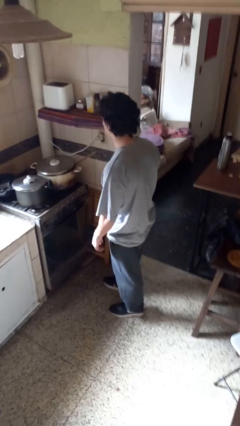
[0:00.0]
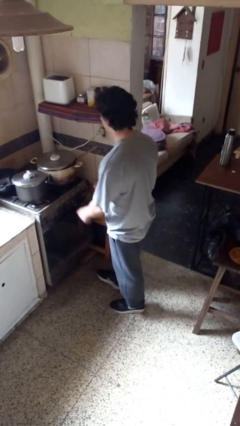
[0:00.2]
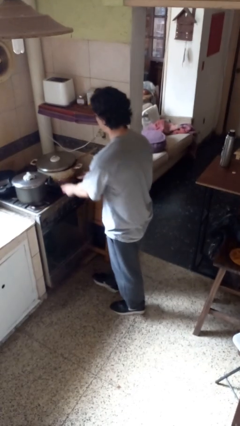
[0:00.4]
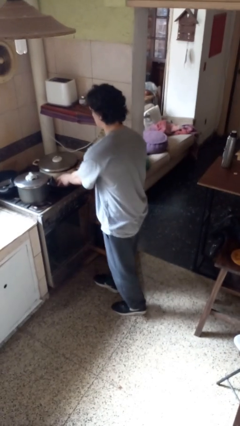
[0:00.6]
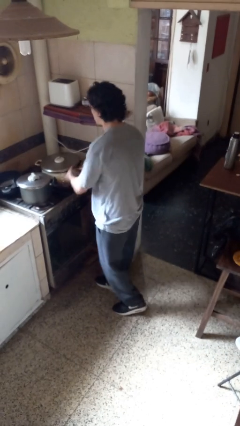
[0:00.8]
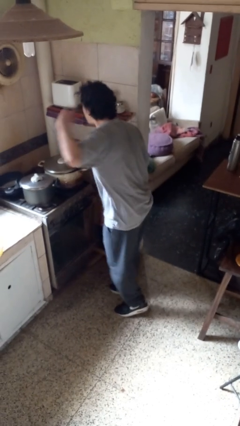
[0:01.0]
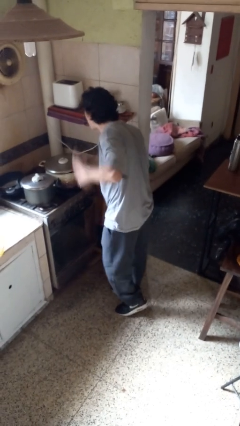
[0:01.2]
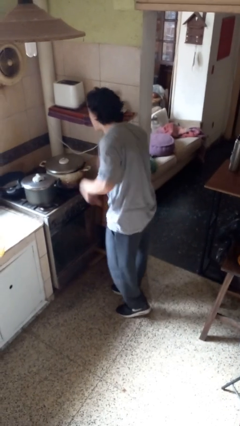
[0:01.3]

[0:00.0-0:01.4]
person burns hand

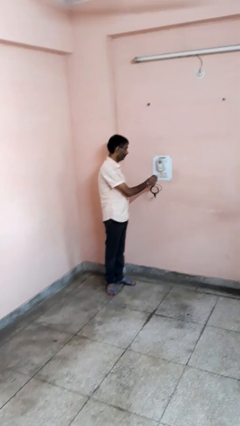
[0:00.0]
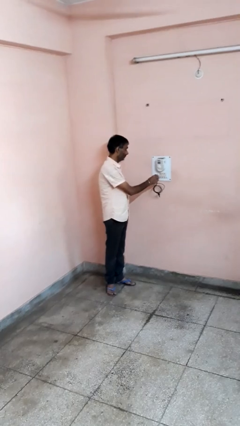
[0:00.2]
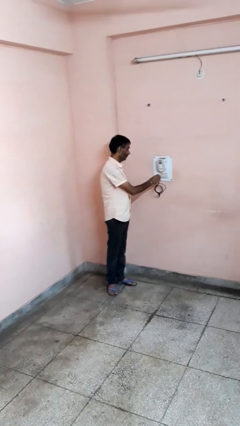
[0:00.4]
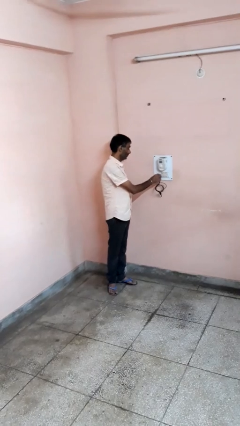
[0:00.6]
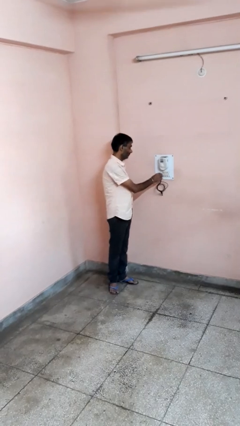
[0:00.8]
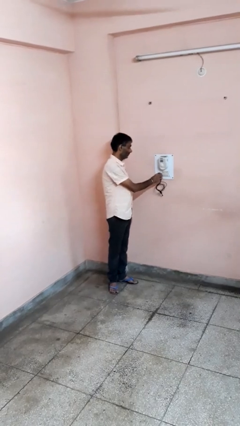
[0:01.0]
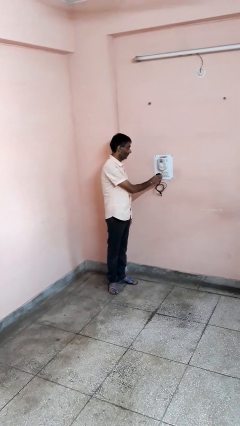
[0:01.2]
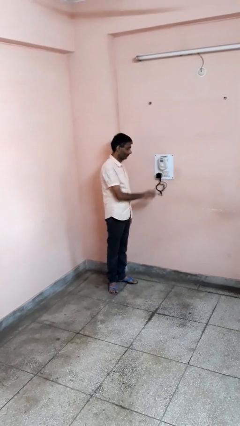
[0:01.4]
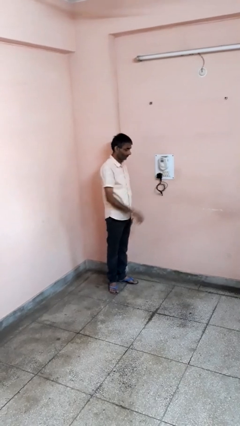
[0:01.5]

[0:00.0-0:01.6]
person plugs into electrical socket

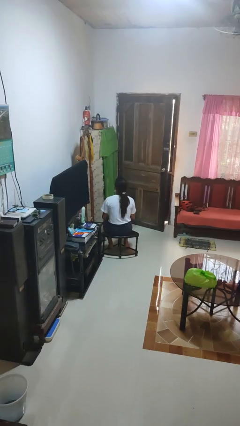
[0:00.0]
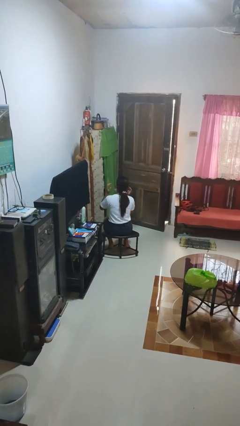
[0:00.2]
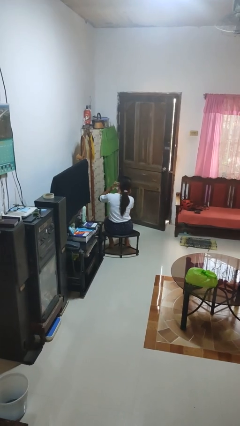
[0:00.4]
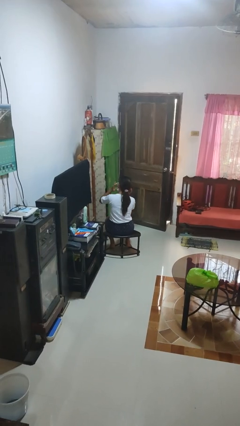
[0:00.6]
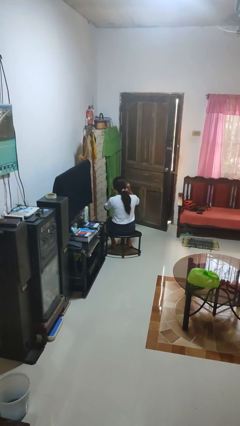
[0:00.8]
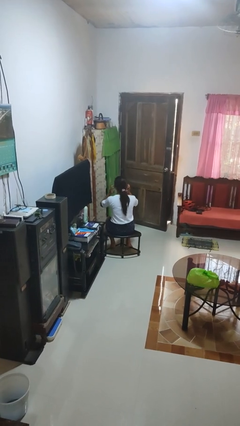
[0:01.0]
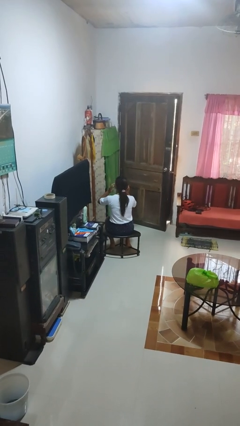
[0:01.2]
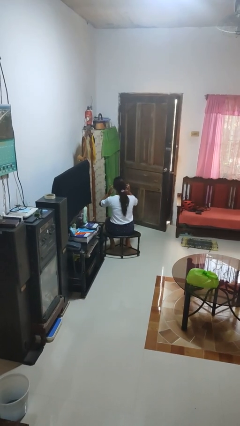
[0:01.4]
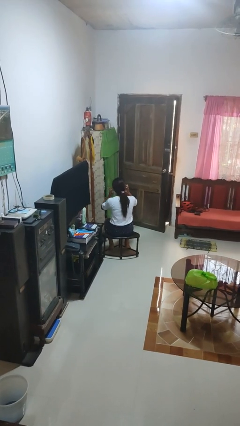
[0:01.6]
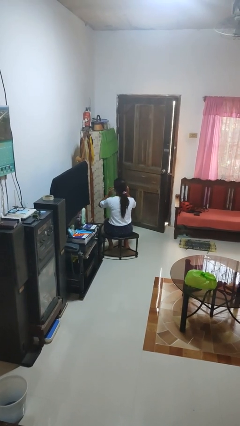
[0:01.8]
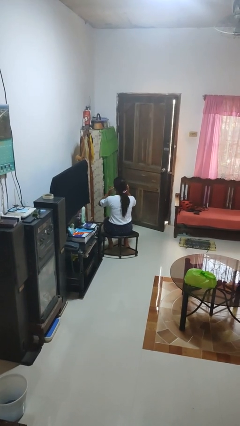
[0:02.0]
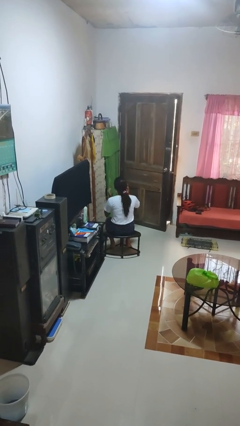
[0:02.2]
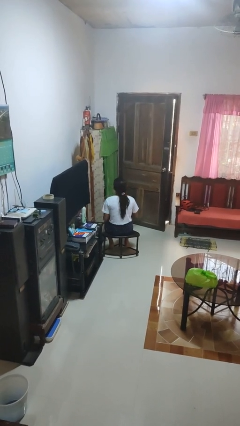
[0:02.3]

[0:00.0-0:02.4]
person puts fingers in ear

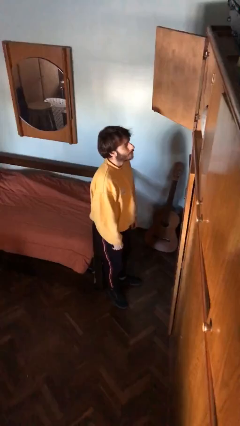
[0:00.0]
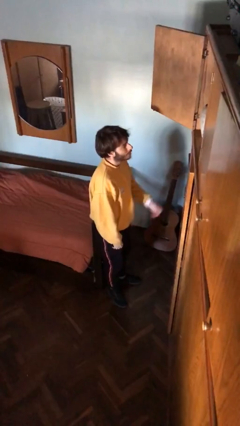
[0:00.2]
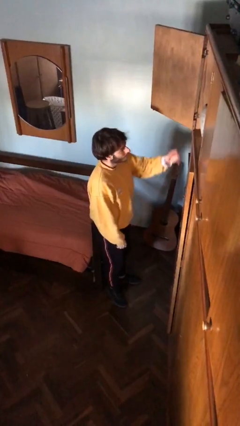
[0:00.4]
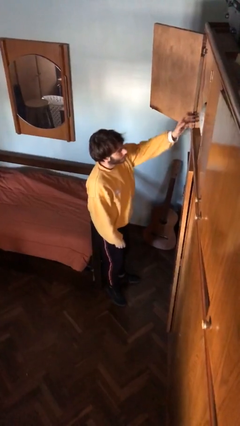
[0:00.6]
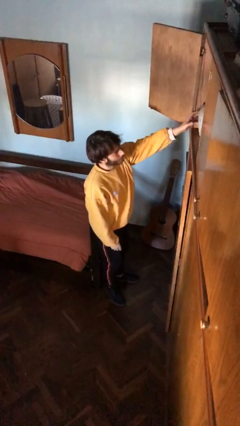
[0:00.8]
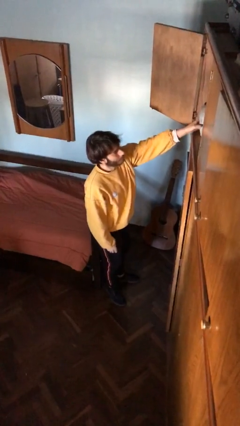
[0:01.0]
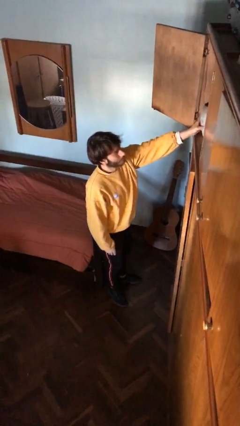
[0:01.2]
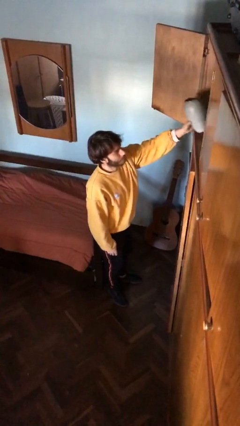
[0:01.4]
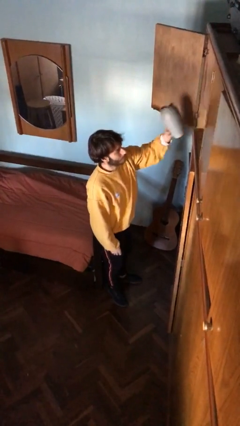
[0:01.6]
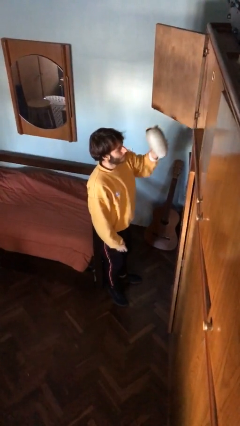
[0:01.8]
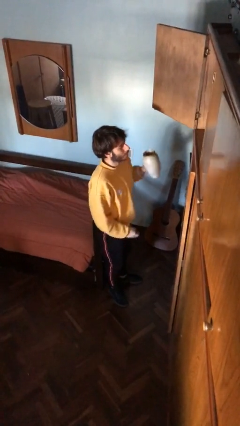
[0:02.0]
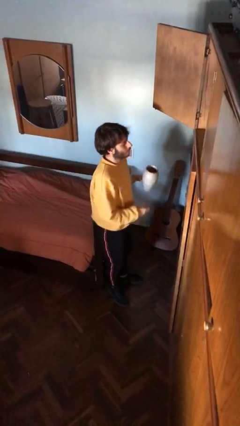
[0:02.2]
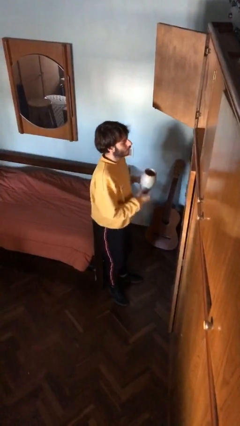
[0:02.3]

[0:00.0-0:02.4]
person picks up object from cabinet

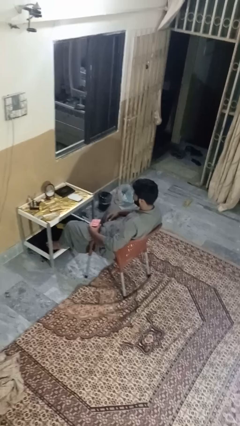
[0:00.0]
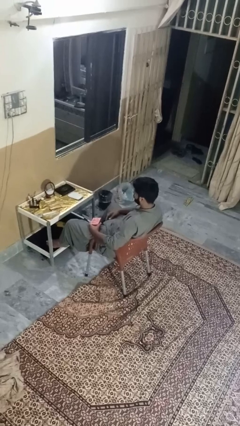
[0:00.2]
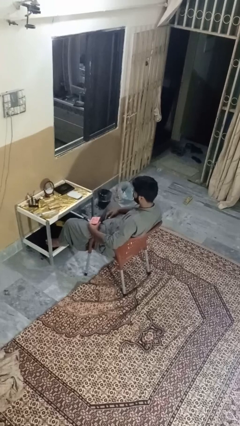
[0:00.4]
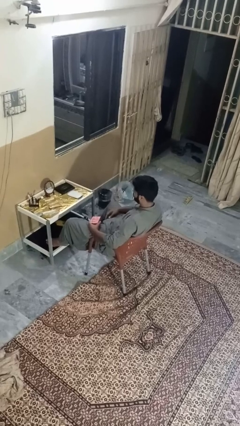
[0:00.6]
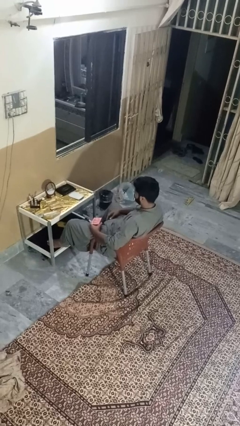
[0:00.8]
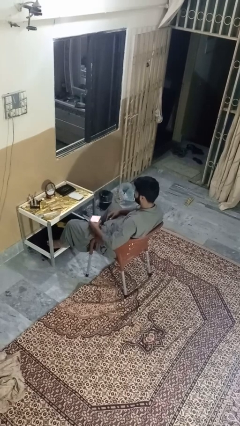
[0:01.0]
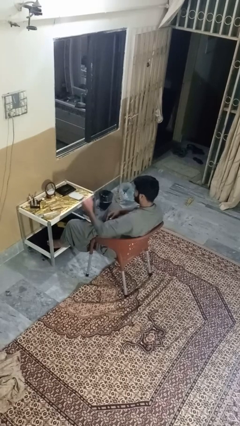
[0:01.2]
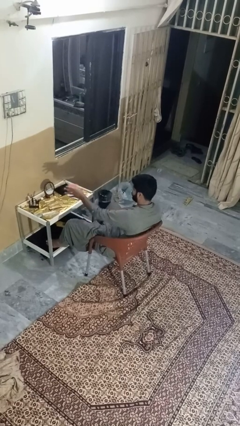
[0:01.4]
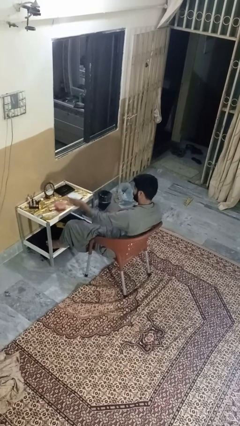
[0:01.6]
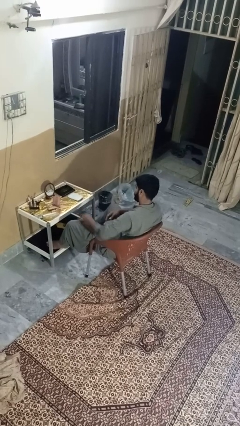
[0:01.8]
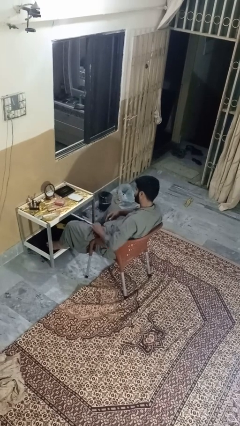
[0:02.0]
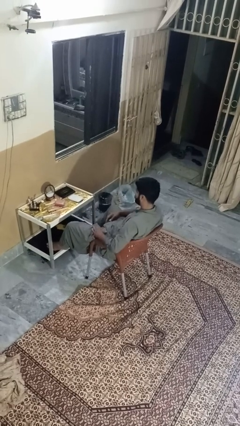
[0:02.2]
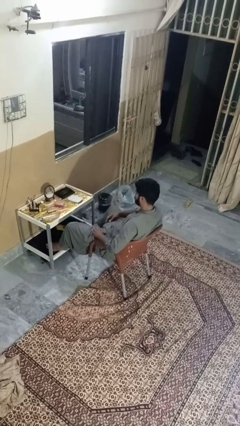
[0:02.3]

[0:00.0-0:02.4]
person throws object on table

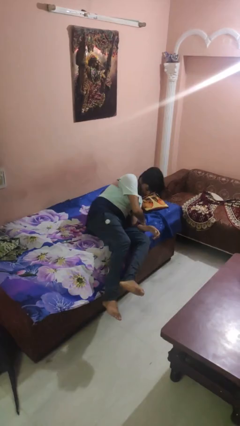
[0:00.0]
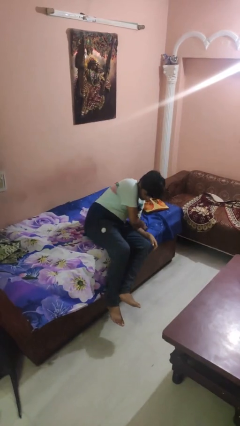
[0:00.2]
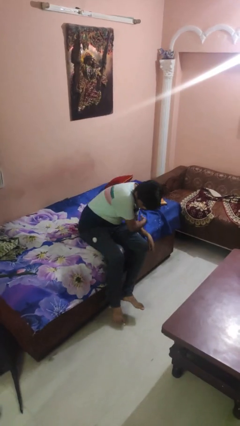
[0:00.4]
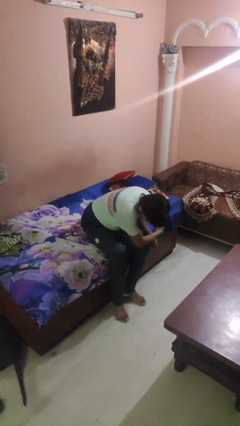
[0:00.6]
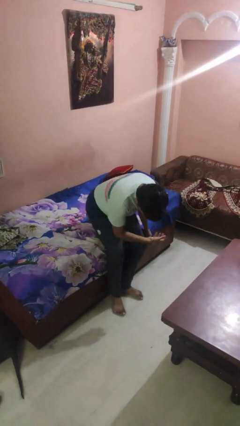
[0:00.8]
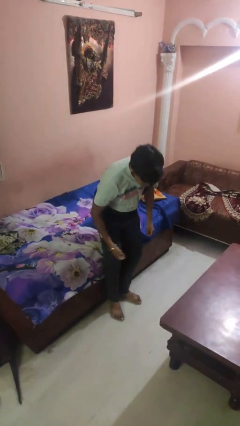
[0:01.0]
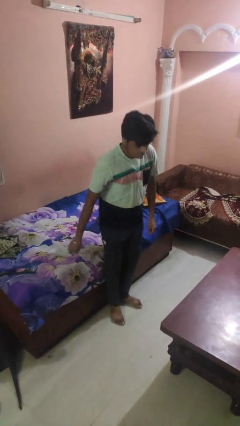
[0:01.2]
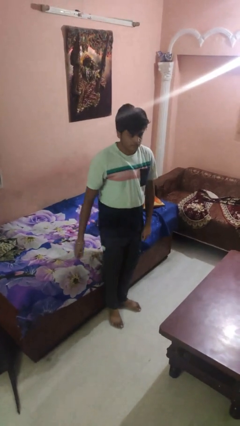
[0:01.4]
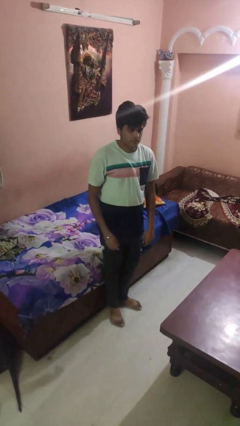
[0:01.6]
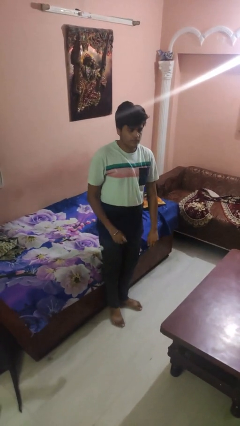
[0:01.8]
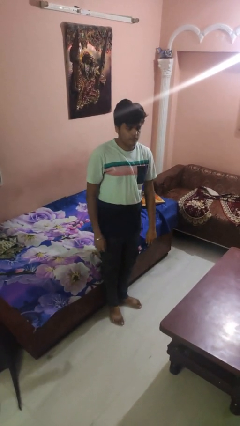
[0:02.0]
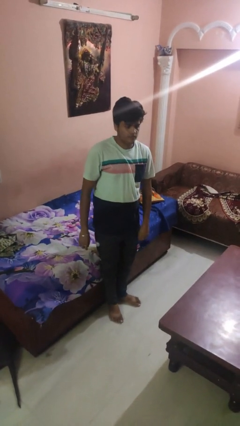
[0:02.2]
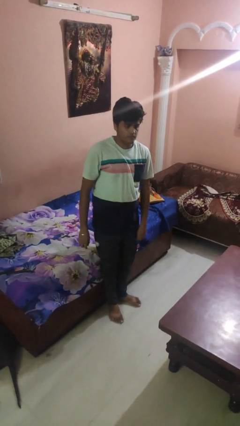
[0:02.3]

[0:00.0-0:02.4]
person stands up

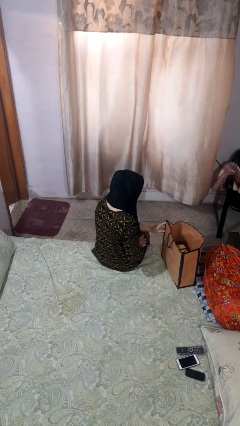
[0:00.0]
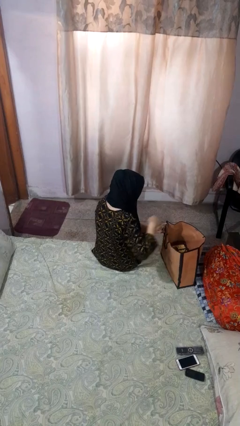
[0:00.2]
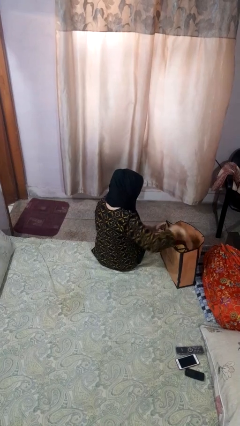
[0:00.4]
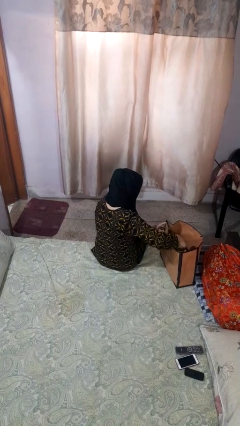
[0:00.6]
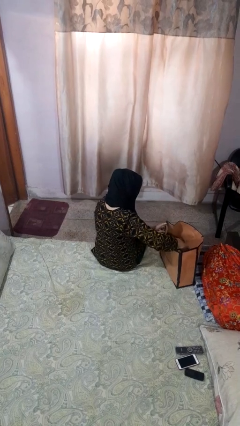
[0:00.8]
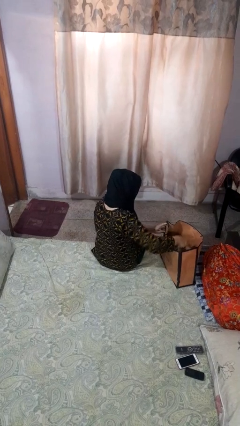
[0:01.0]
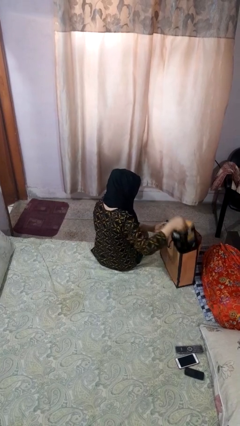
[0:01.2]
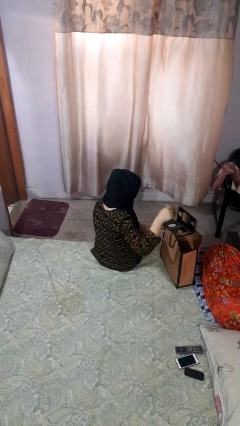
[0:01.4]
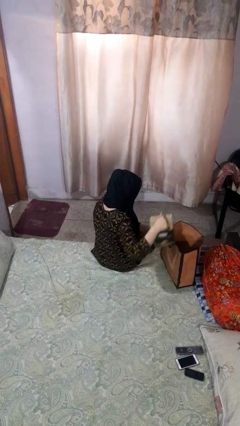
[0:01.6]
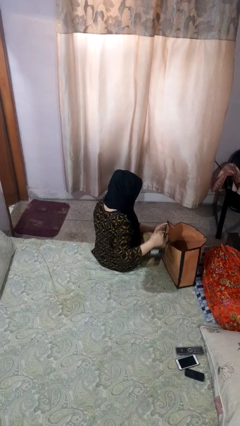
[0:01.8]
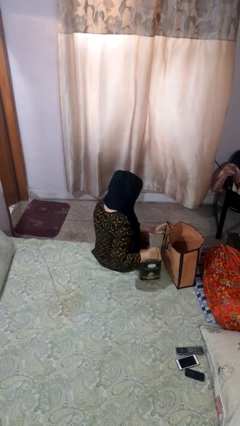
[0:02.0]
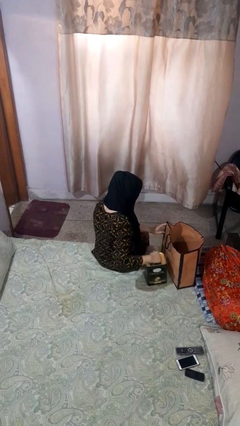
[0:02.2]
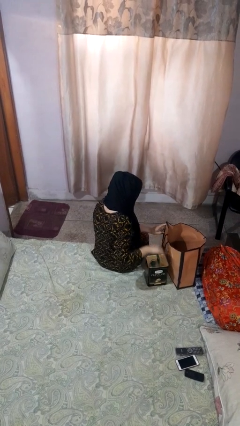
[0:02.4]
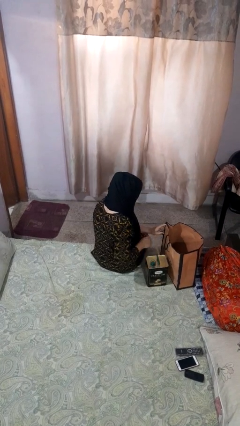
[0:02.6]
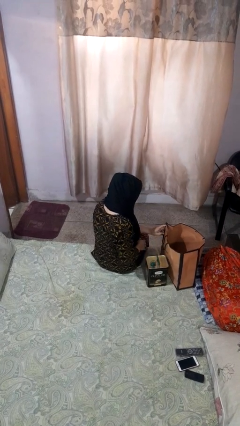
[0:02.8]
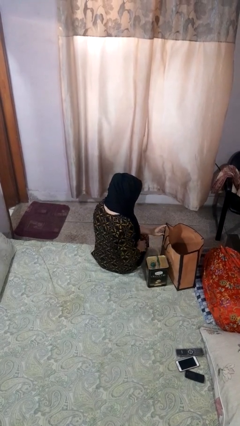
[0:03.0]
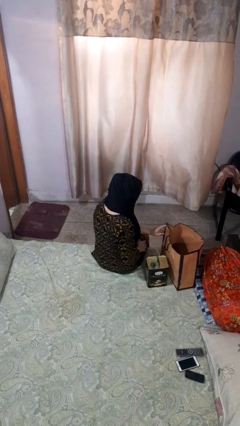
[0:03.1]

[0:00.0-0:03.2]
person takes object from bag

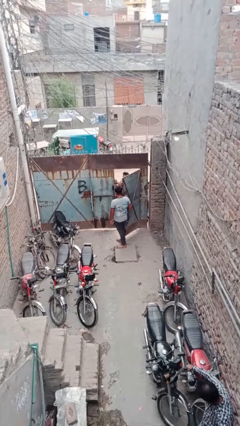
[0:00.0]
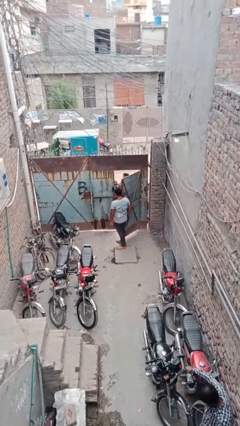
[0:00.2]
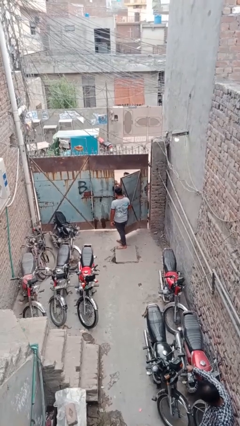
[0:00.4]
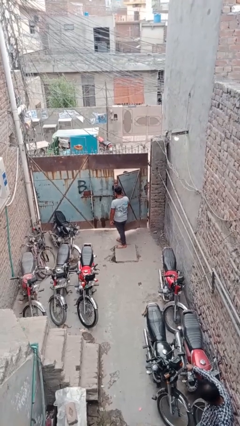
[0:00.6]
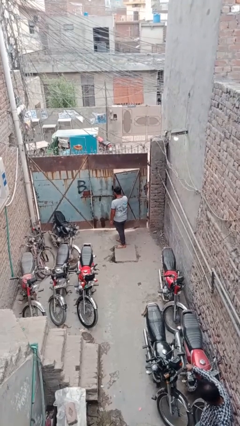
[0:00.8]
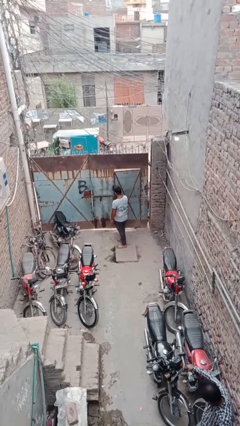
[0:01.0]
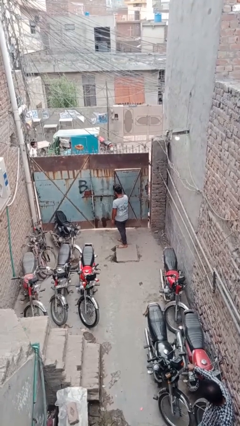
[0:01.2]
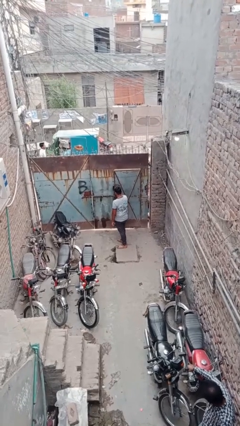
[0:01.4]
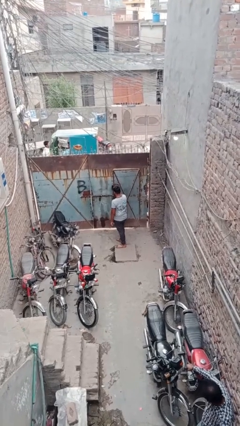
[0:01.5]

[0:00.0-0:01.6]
person closes facility door
